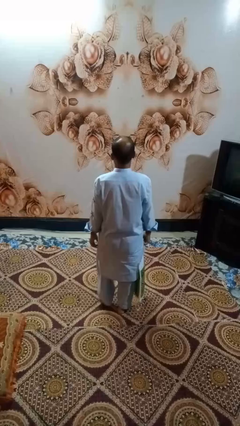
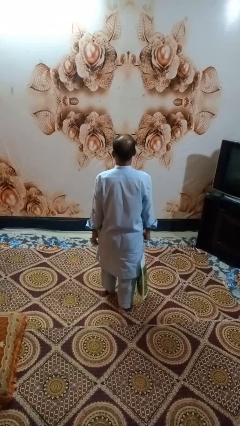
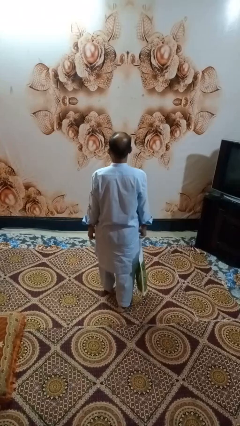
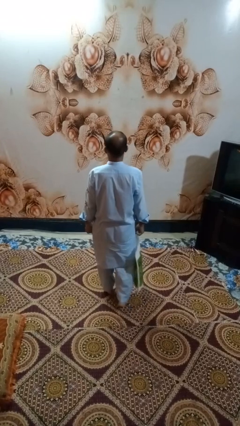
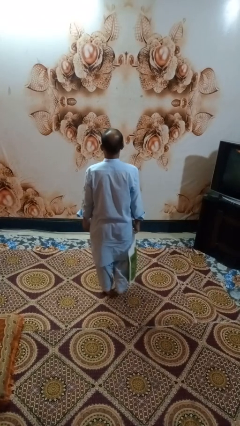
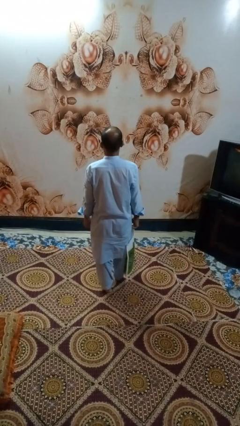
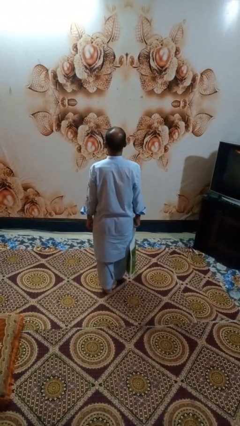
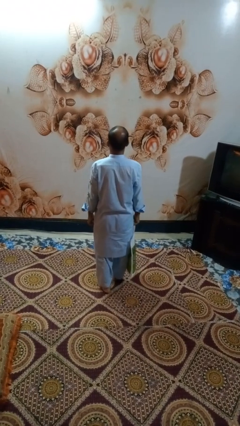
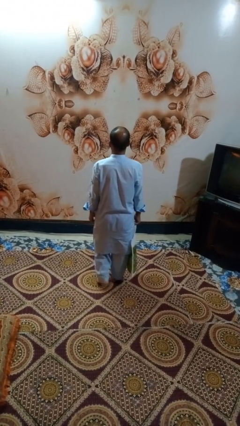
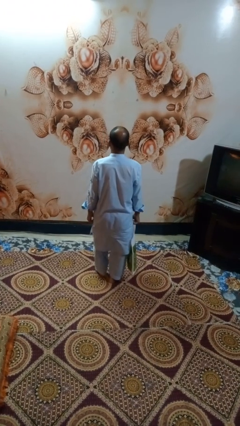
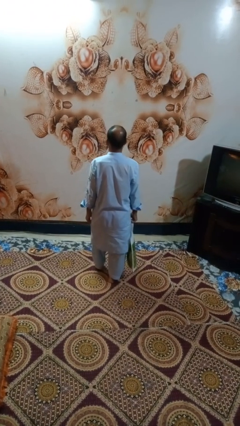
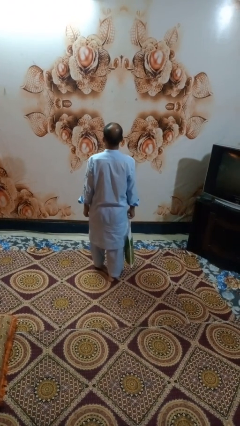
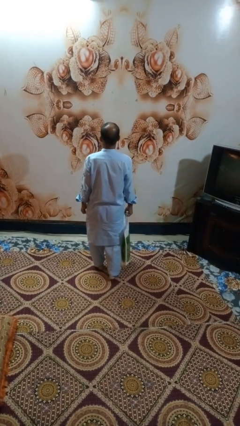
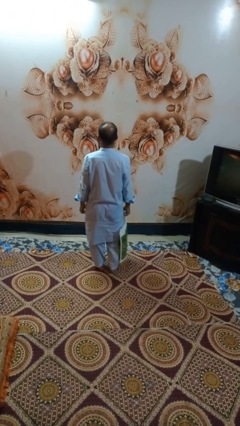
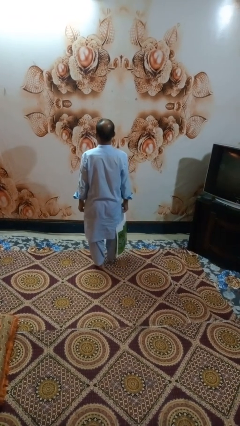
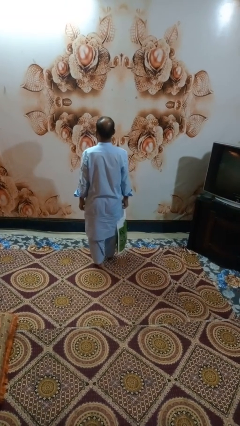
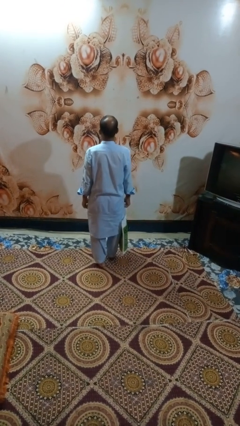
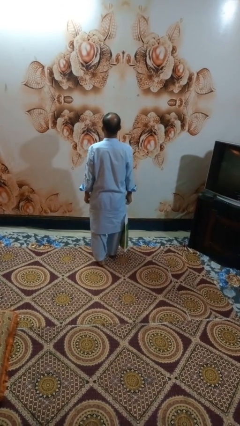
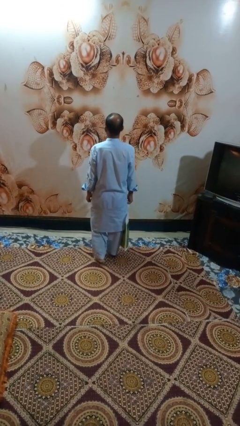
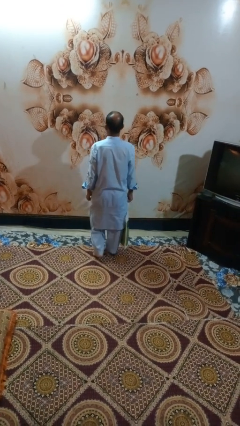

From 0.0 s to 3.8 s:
person carries groceries

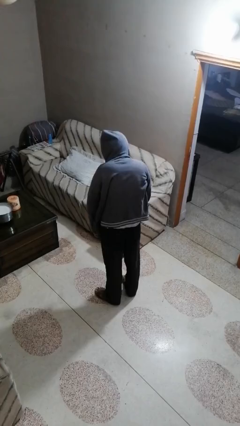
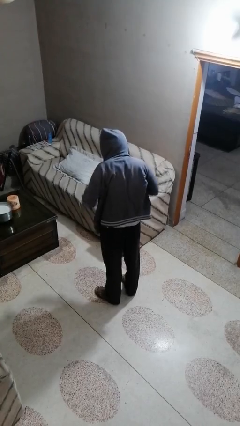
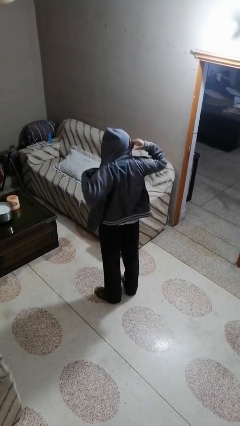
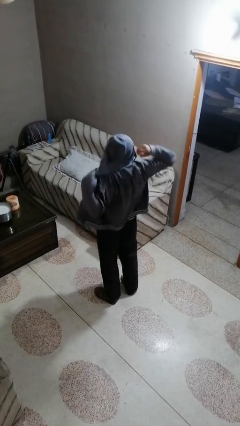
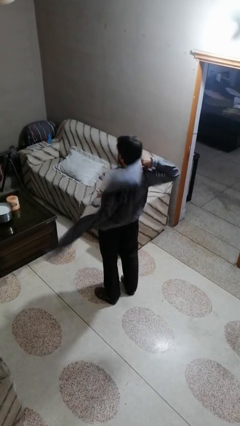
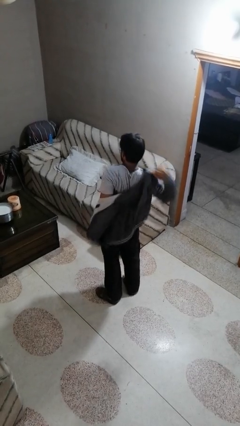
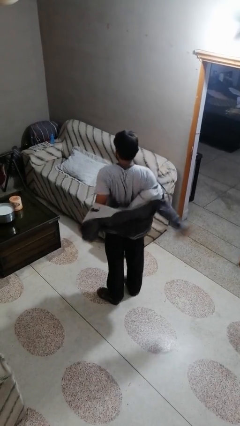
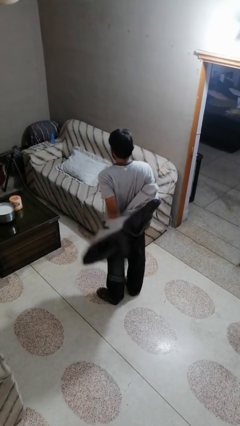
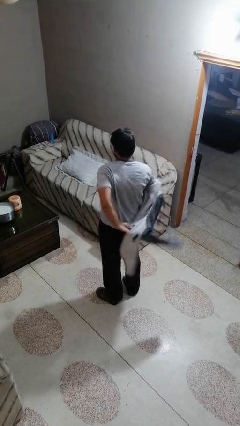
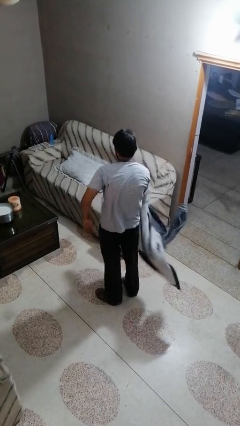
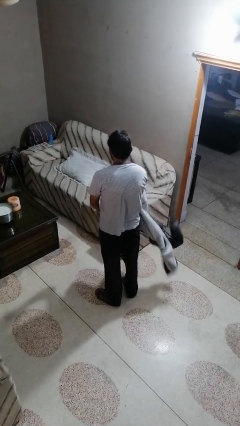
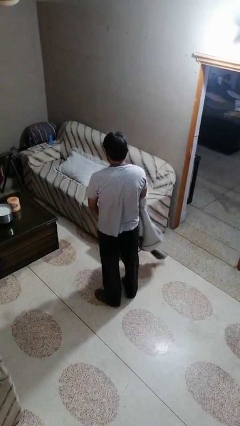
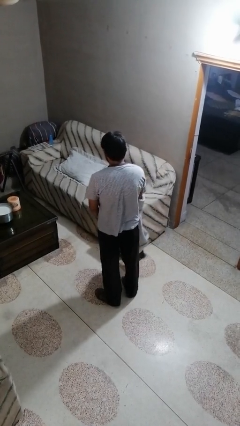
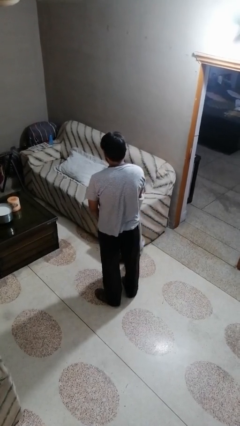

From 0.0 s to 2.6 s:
person takes off hoodie

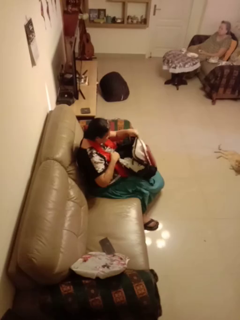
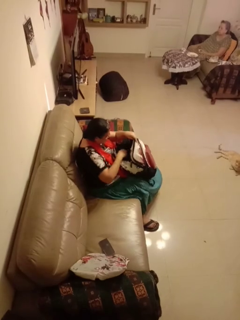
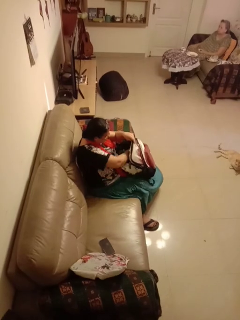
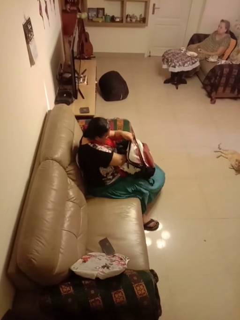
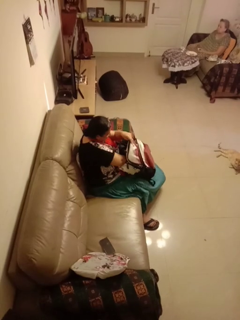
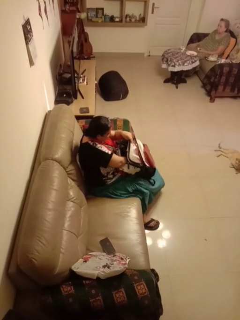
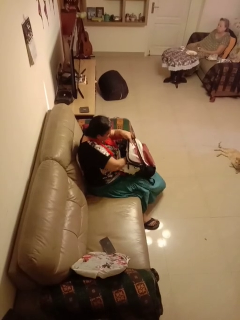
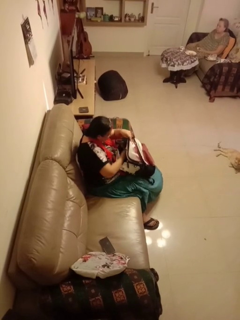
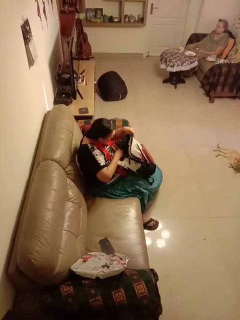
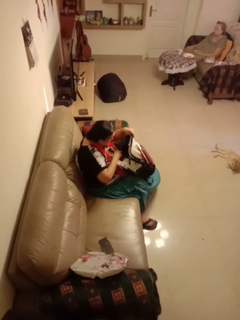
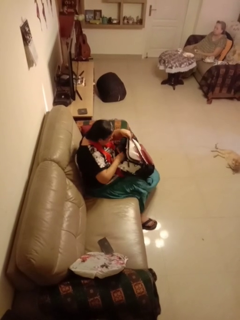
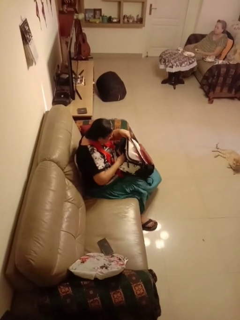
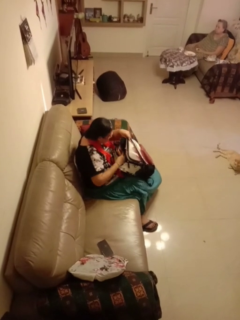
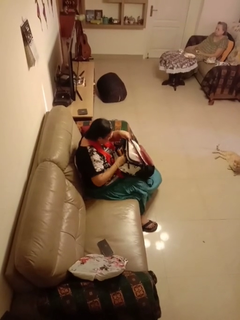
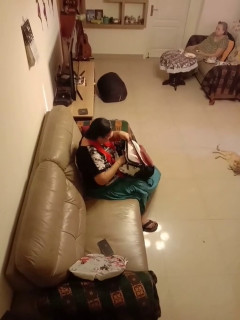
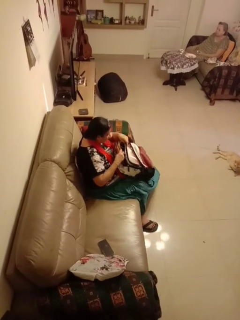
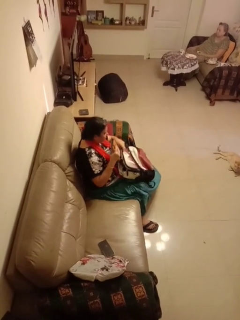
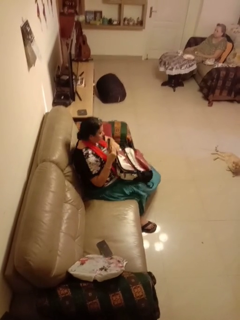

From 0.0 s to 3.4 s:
person searches in backpack

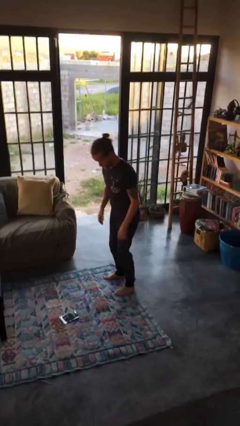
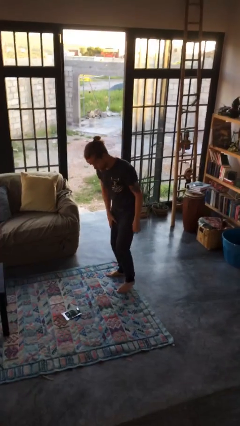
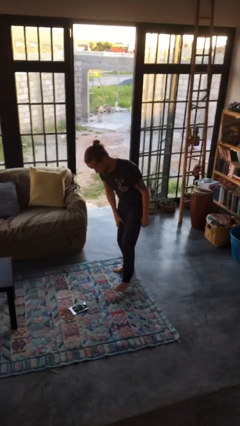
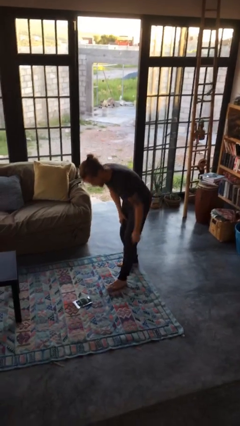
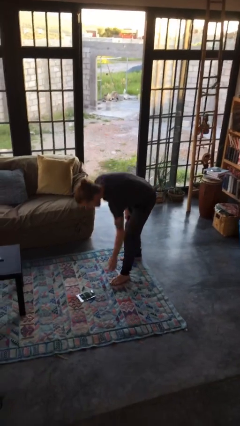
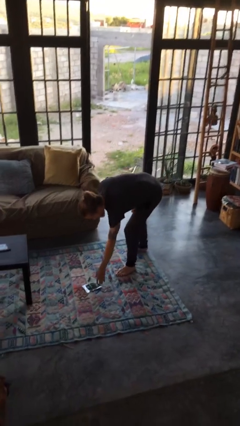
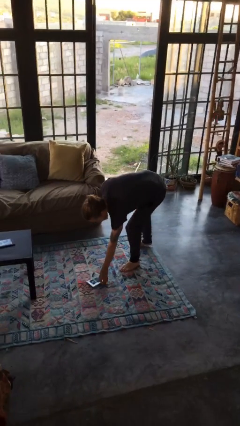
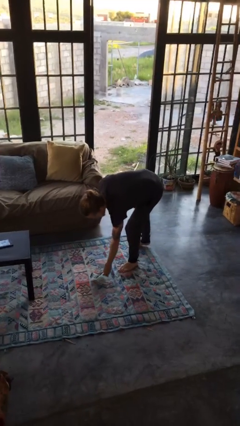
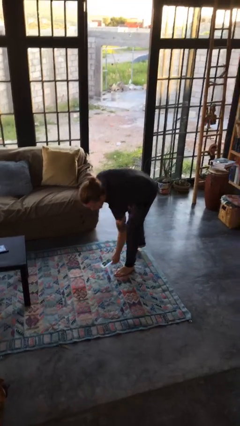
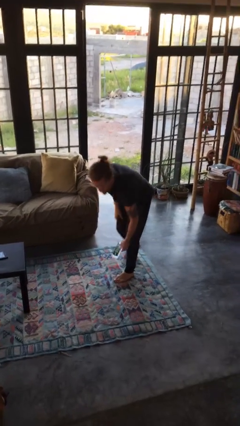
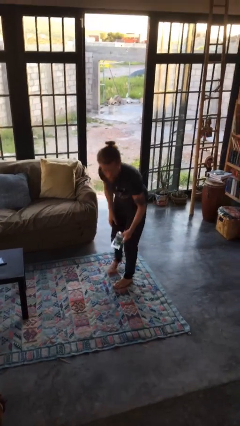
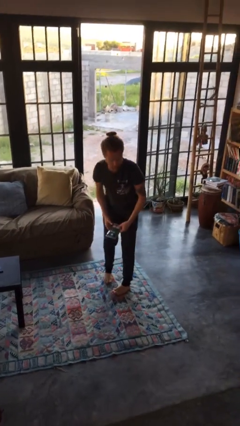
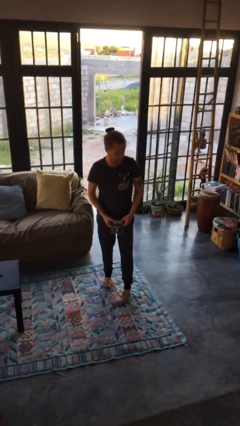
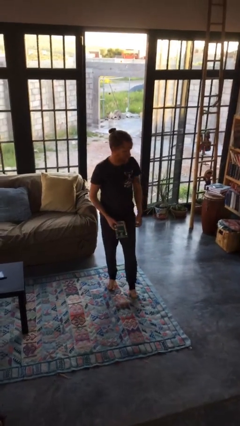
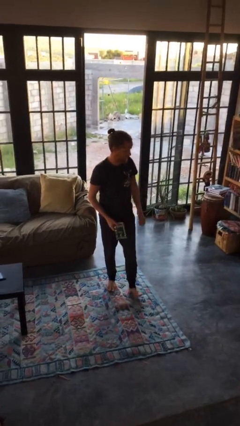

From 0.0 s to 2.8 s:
person picks up object from floor

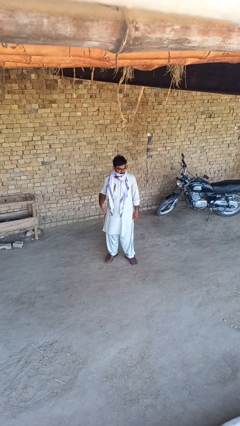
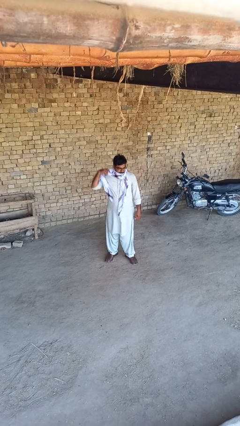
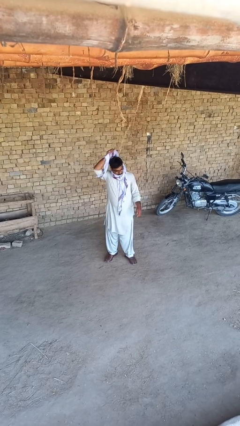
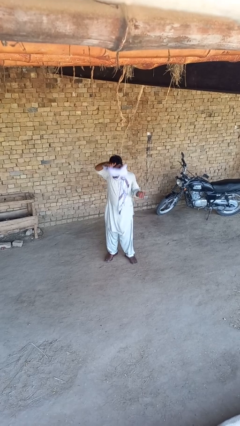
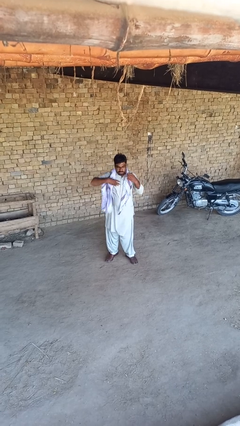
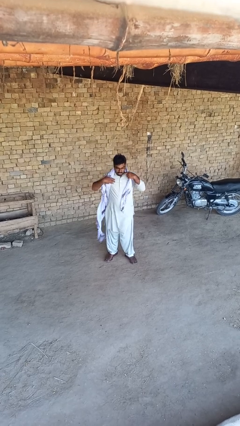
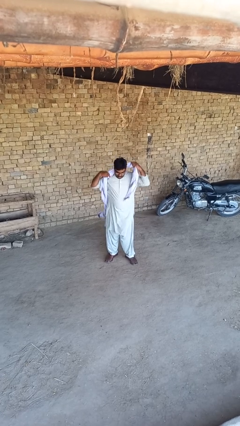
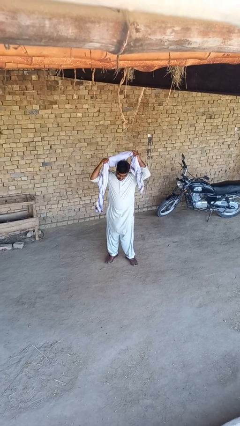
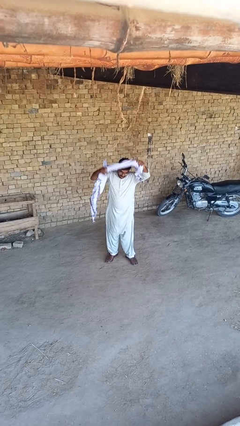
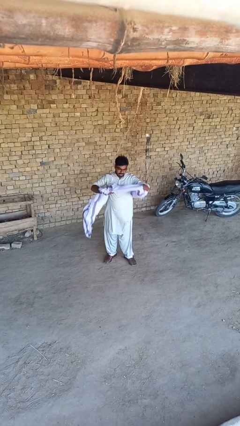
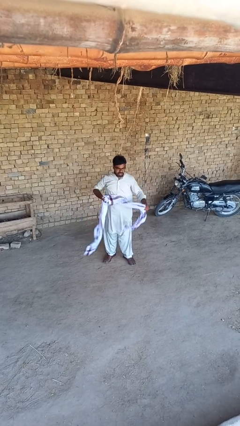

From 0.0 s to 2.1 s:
person takes off scarf

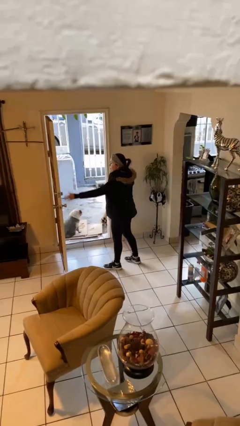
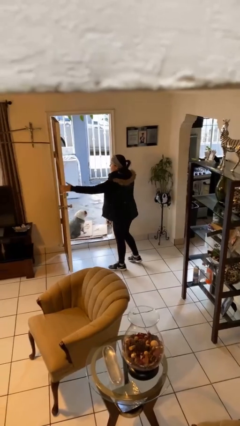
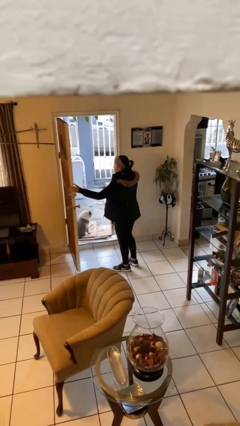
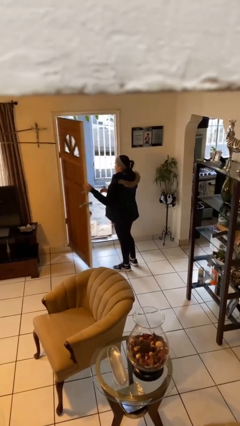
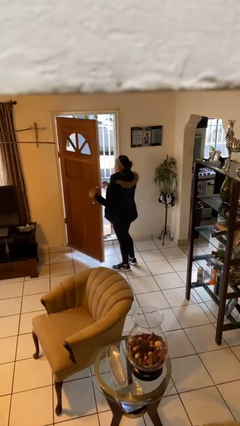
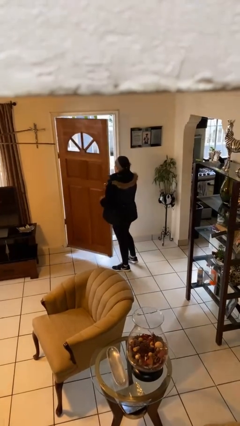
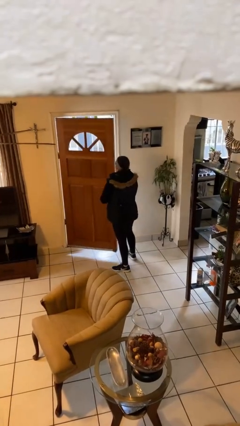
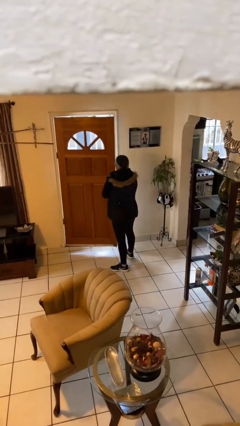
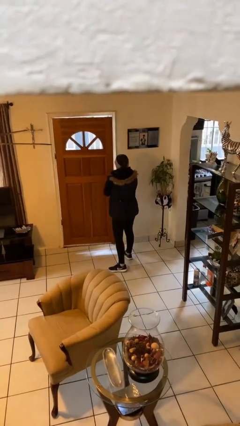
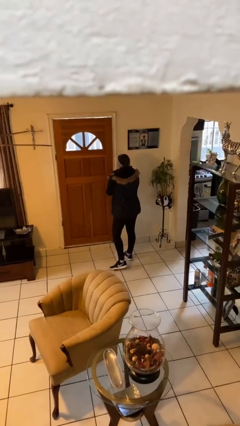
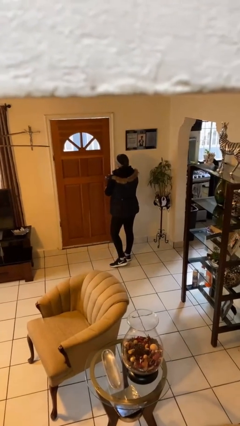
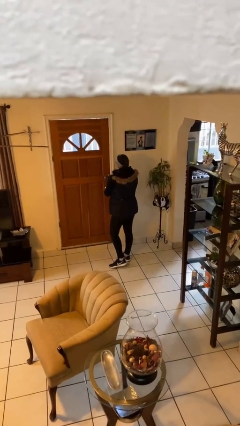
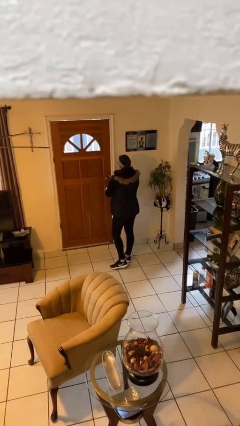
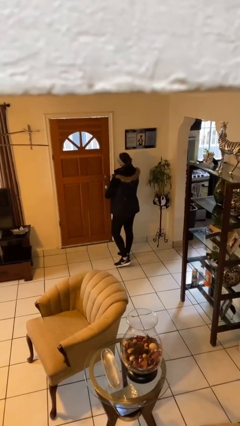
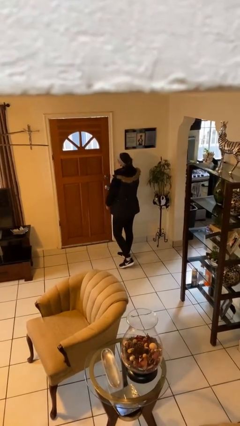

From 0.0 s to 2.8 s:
person closes facility door

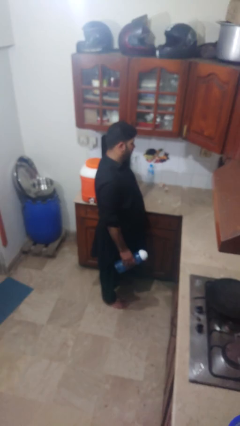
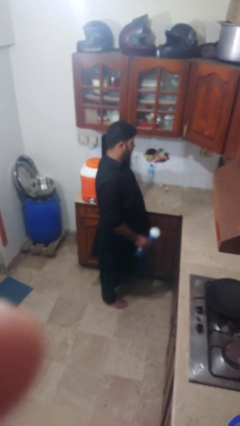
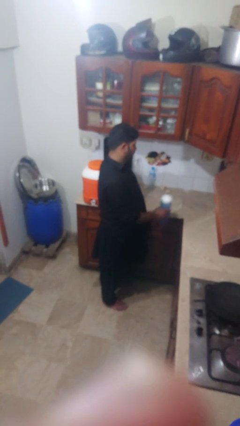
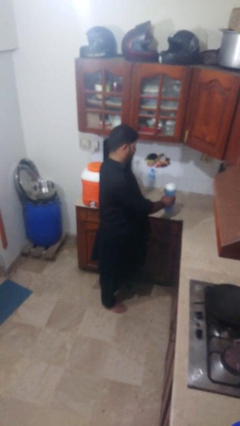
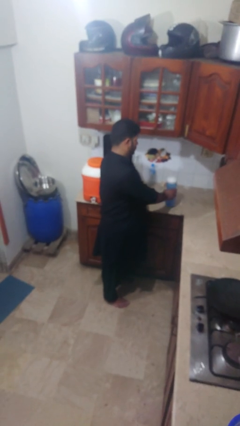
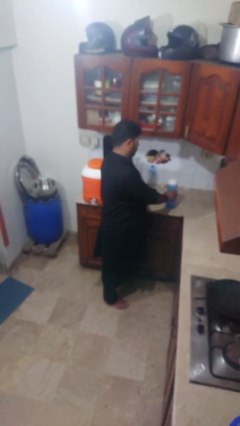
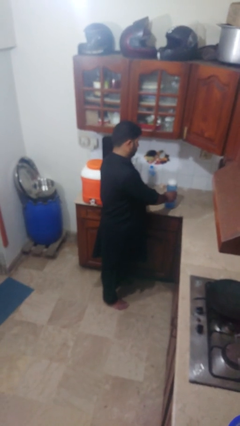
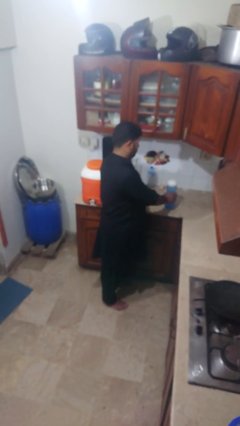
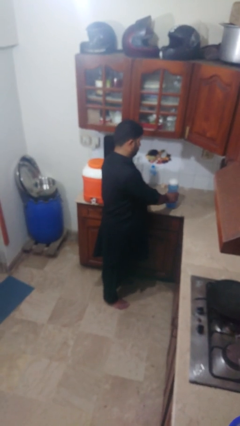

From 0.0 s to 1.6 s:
person puts down object on countertop
